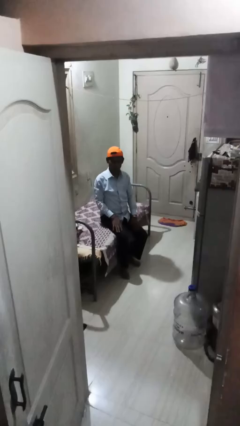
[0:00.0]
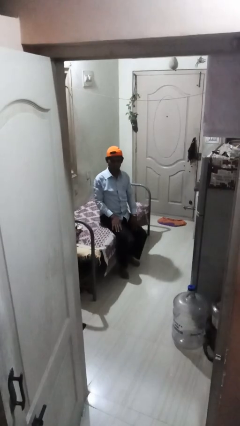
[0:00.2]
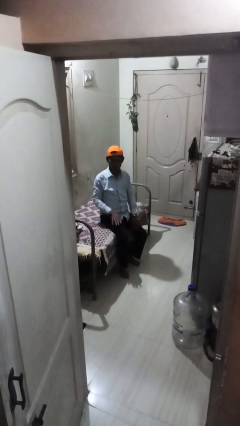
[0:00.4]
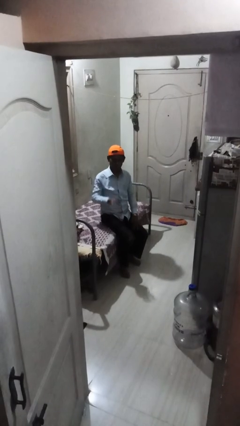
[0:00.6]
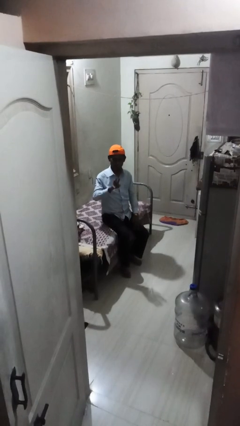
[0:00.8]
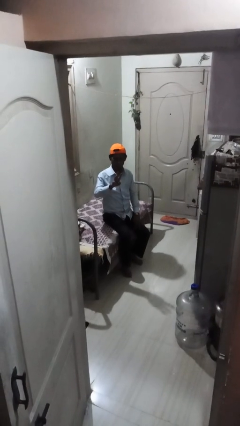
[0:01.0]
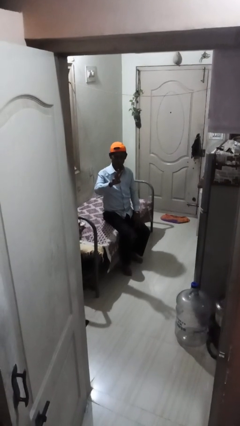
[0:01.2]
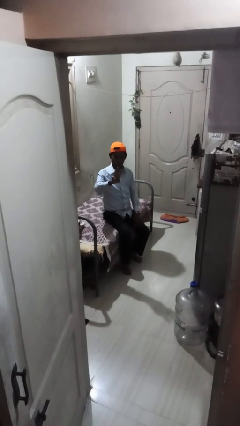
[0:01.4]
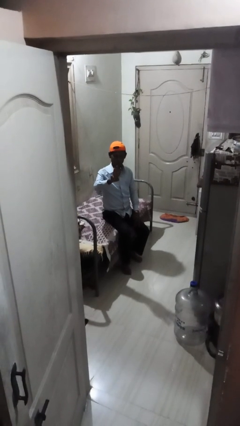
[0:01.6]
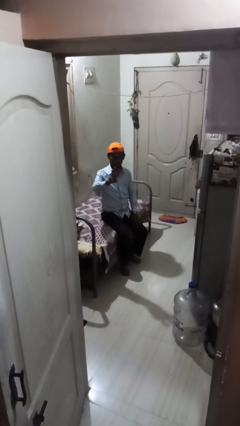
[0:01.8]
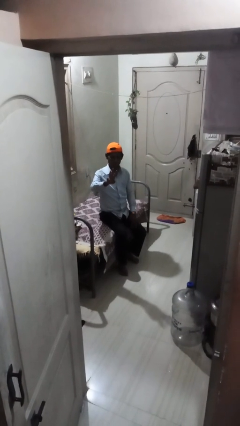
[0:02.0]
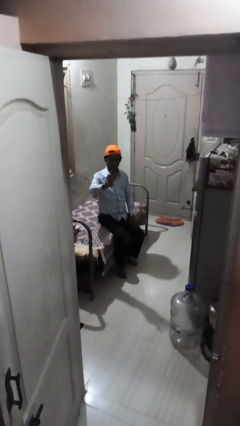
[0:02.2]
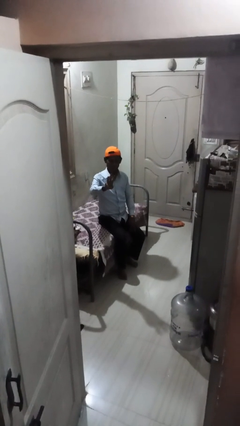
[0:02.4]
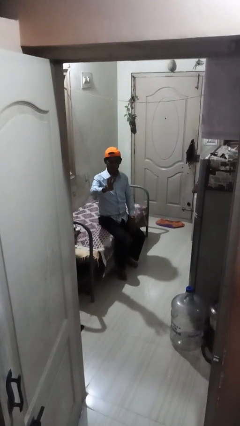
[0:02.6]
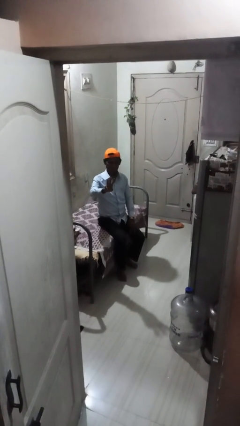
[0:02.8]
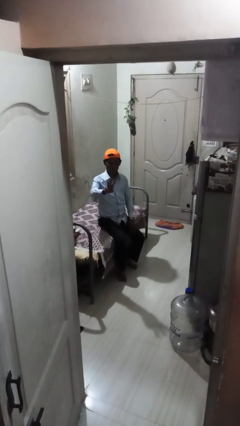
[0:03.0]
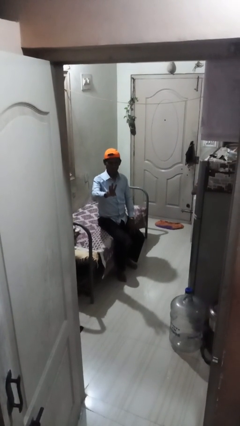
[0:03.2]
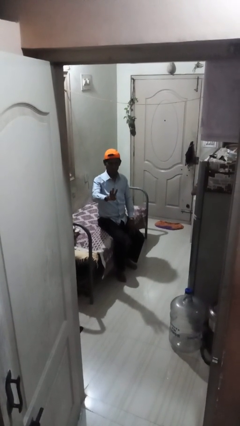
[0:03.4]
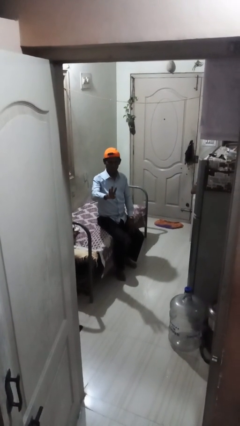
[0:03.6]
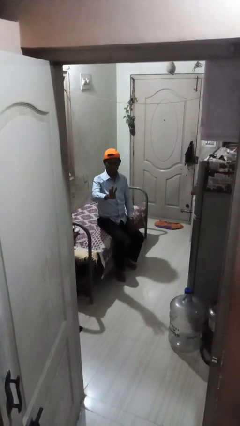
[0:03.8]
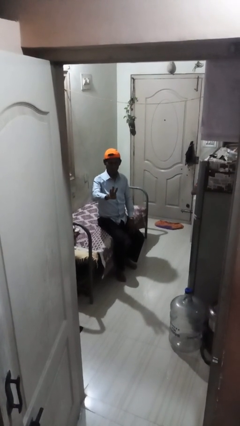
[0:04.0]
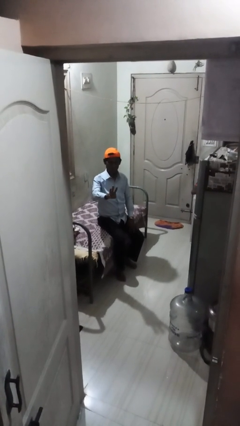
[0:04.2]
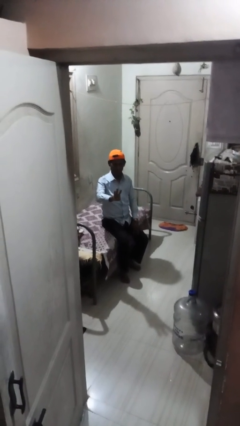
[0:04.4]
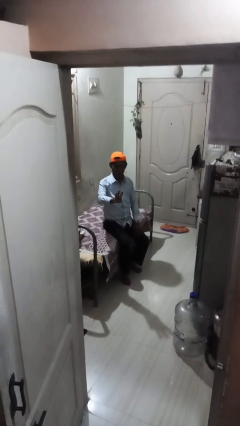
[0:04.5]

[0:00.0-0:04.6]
person gestures number three

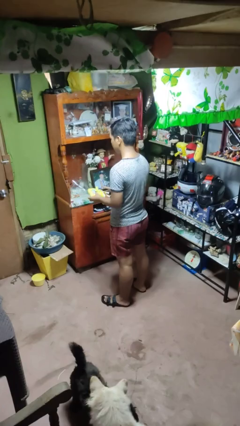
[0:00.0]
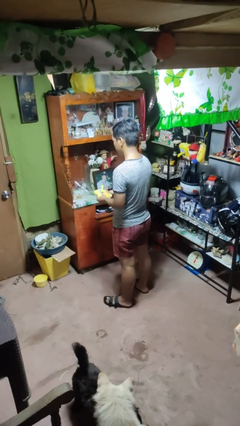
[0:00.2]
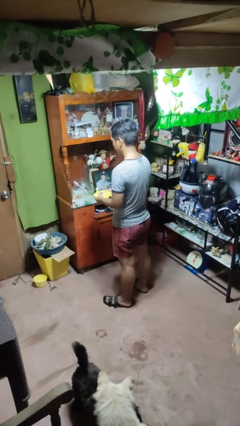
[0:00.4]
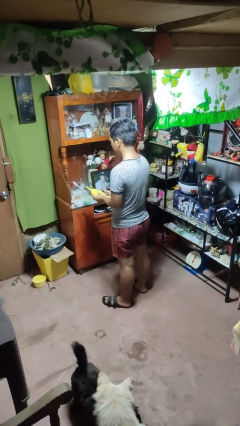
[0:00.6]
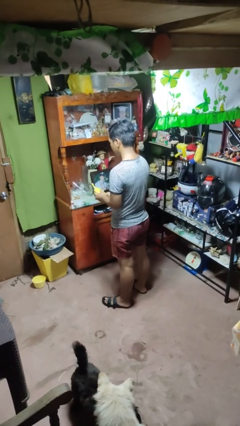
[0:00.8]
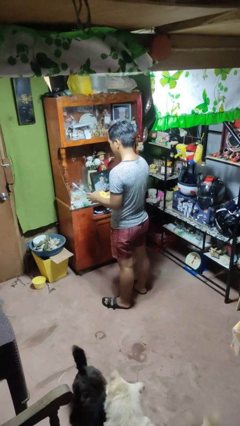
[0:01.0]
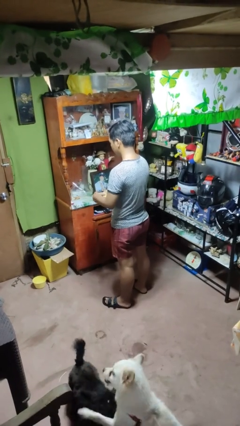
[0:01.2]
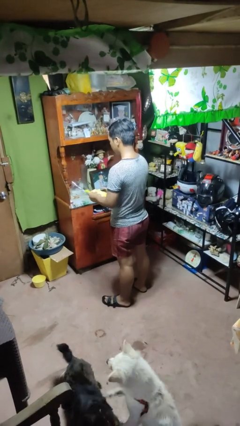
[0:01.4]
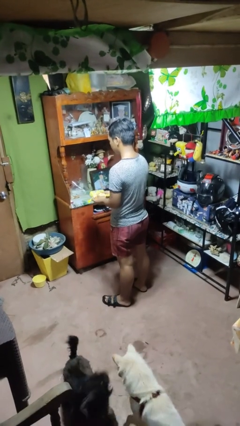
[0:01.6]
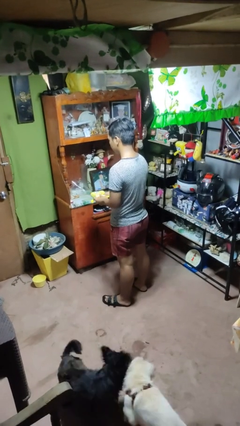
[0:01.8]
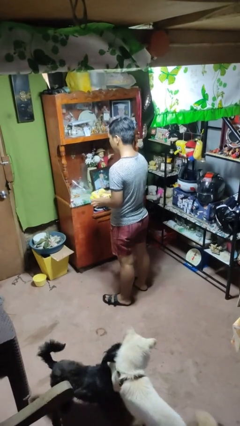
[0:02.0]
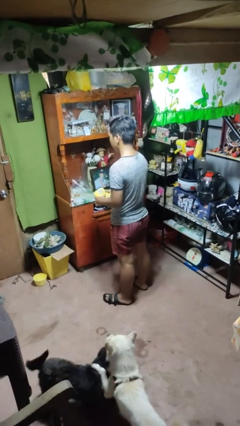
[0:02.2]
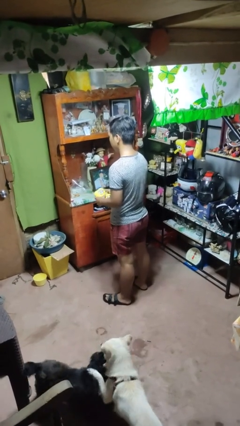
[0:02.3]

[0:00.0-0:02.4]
person squeezes object

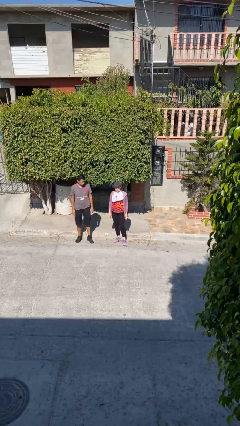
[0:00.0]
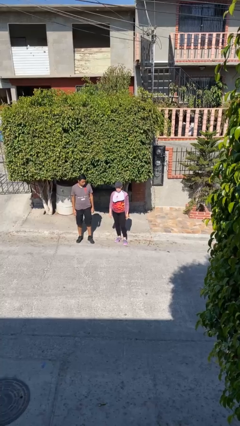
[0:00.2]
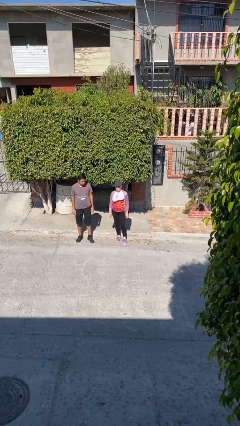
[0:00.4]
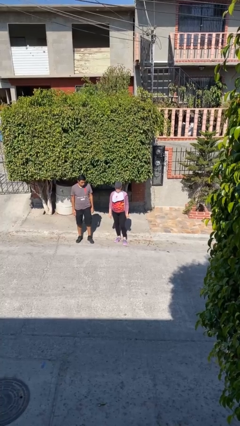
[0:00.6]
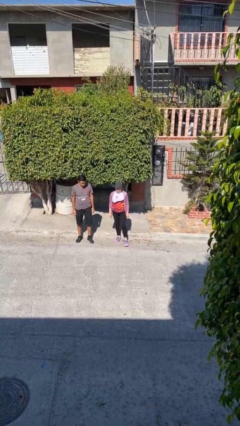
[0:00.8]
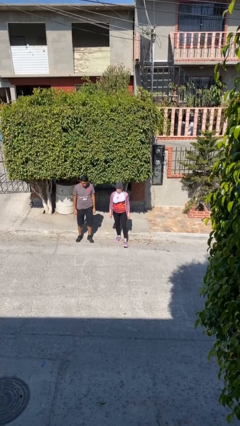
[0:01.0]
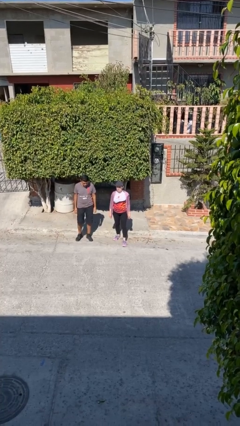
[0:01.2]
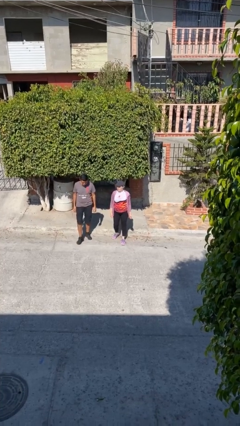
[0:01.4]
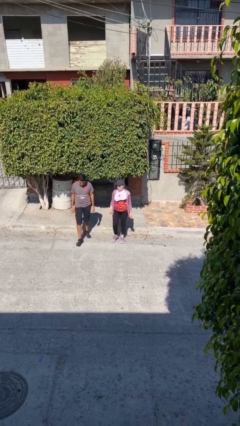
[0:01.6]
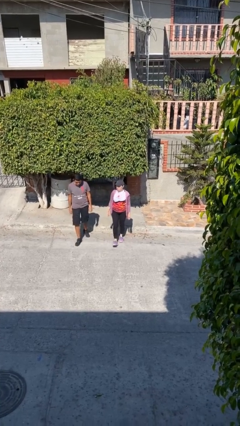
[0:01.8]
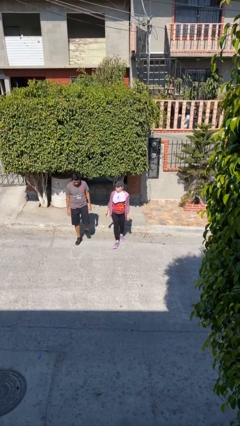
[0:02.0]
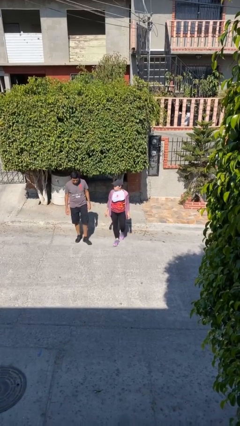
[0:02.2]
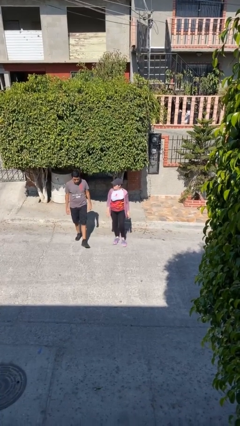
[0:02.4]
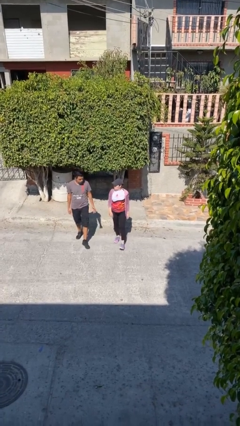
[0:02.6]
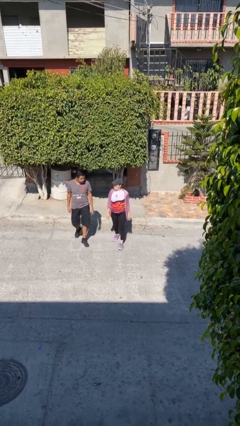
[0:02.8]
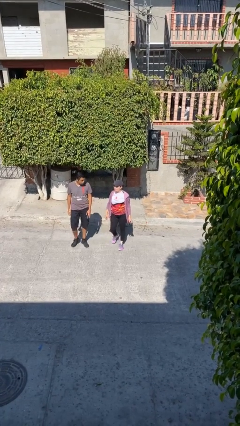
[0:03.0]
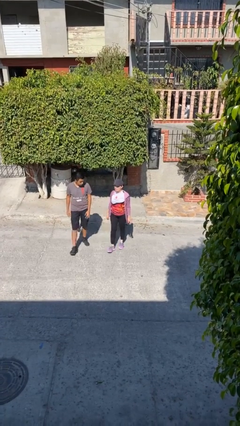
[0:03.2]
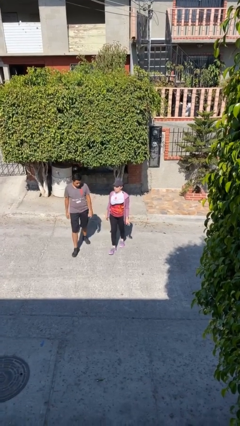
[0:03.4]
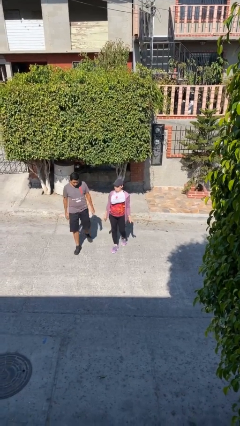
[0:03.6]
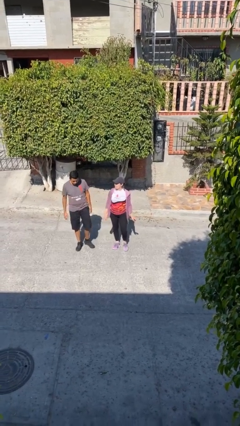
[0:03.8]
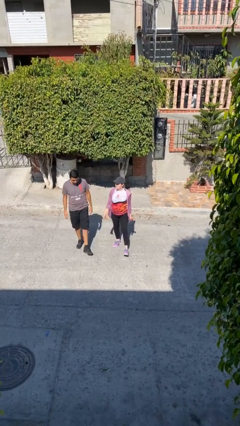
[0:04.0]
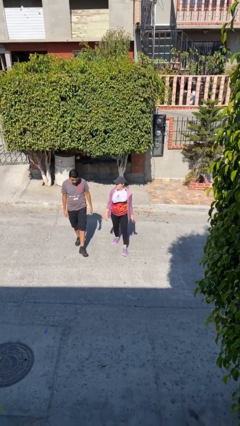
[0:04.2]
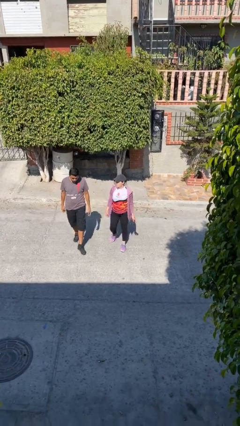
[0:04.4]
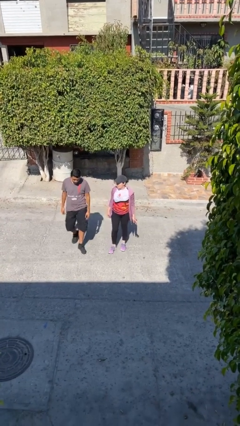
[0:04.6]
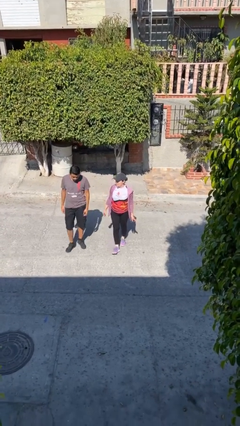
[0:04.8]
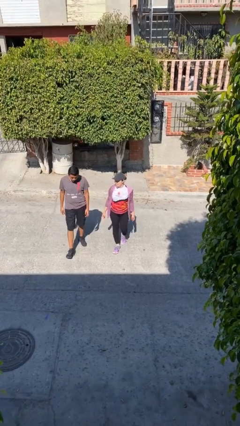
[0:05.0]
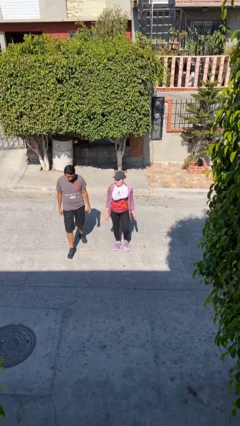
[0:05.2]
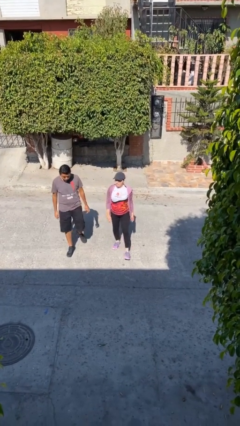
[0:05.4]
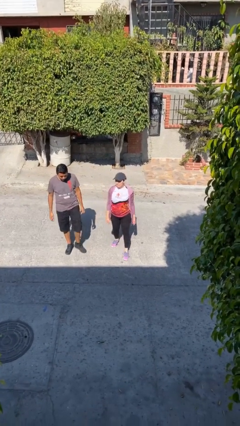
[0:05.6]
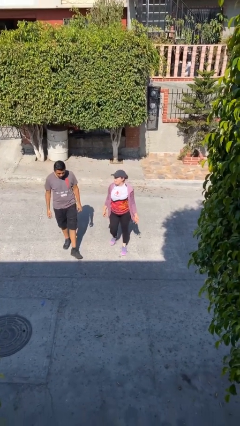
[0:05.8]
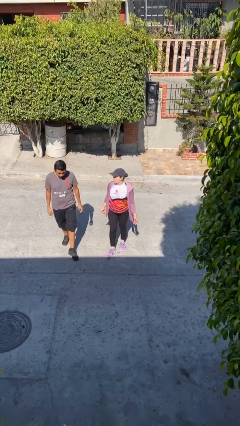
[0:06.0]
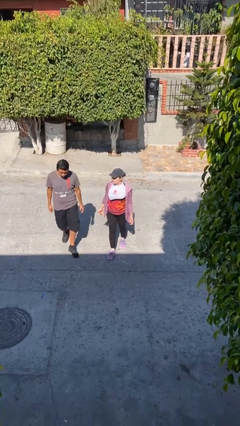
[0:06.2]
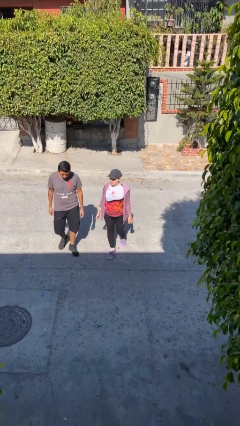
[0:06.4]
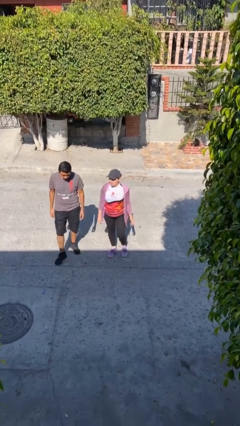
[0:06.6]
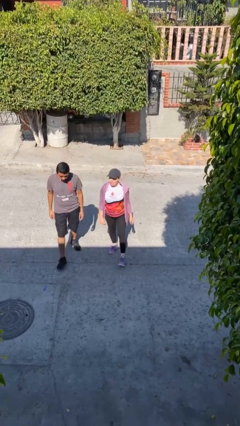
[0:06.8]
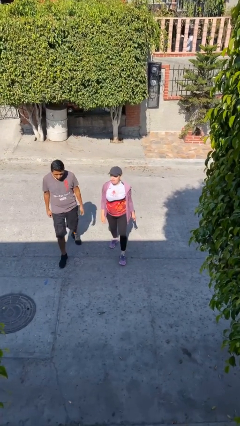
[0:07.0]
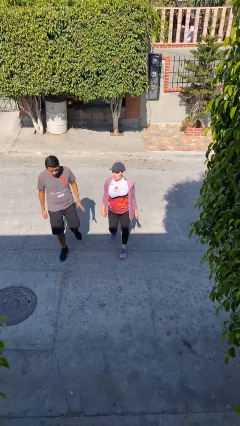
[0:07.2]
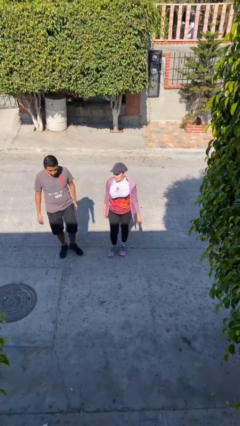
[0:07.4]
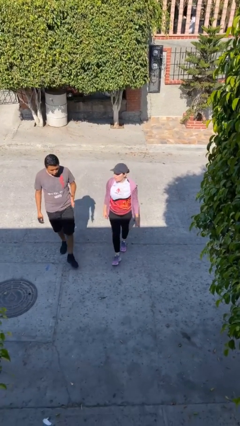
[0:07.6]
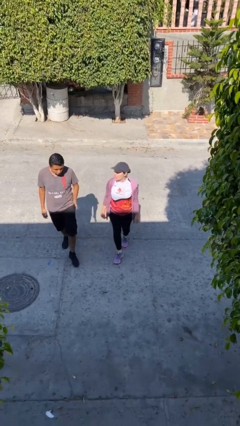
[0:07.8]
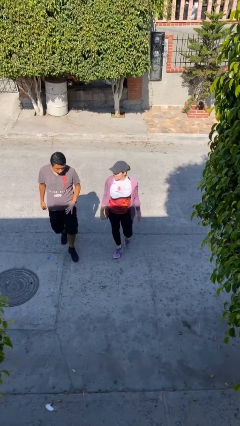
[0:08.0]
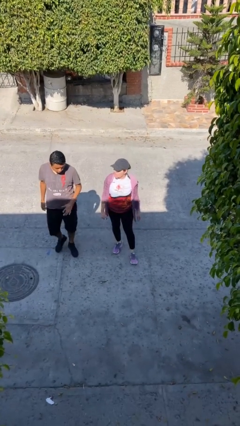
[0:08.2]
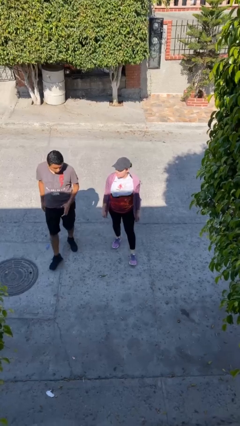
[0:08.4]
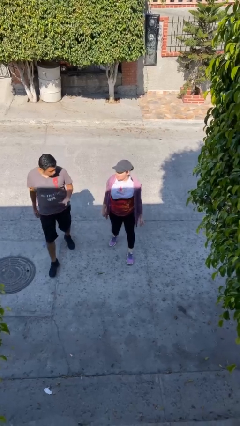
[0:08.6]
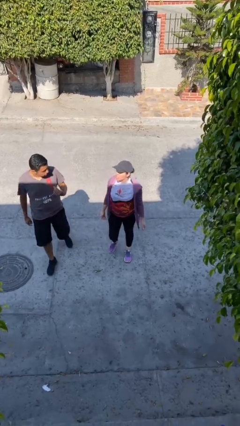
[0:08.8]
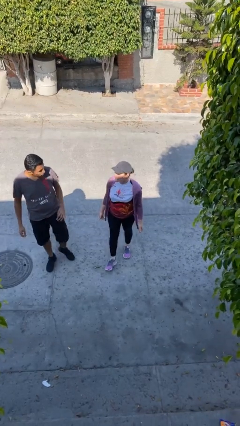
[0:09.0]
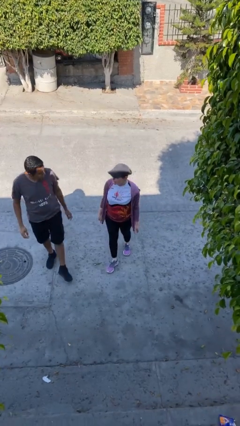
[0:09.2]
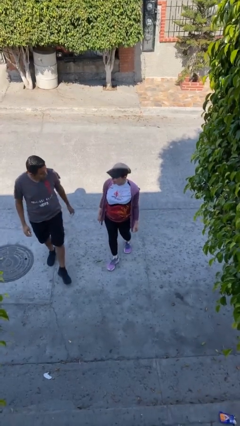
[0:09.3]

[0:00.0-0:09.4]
person talks to person

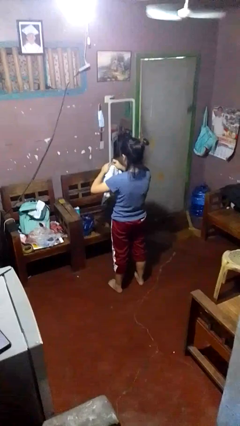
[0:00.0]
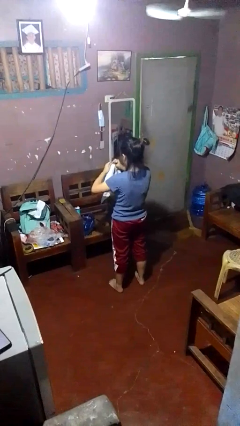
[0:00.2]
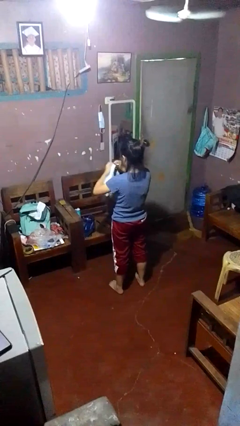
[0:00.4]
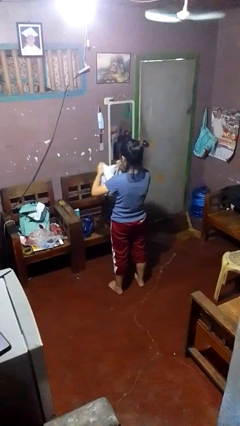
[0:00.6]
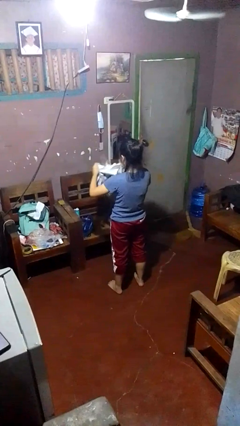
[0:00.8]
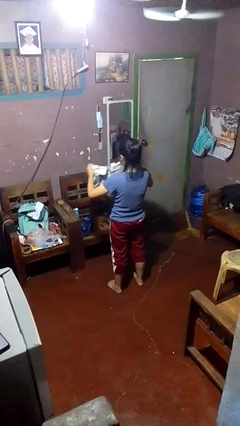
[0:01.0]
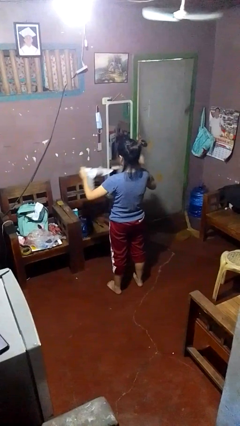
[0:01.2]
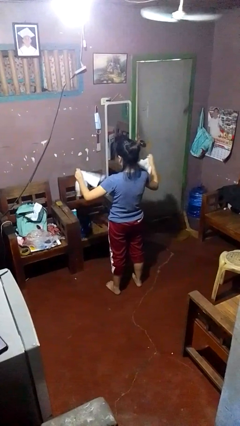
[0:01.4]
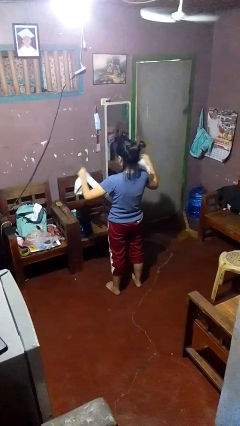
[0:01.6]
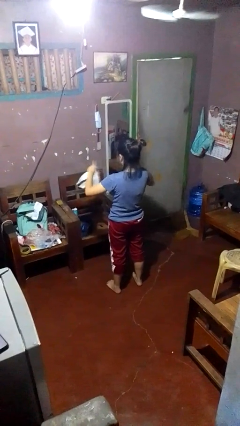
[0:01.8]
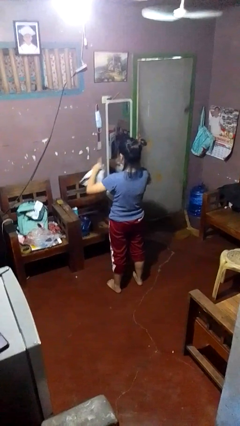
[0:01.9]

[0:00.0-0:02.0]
person tears paper
